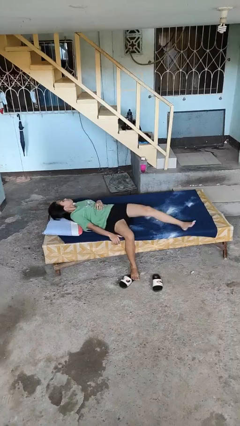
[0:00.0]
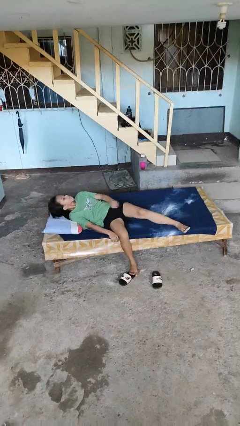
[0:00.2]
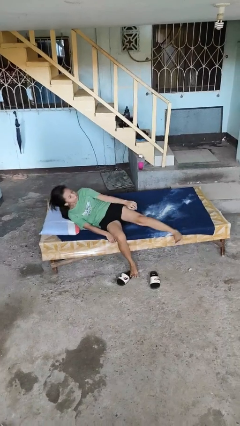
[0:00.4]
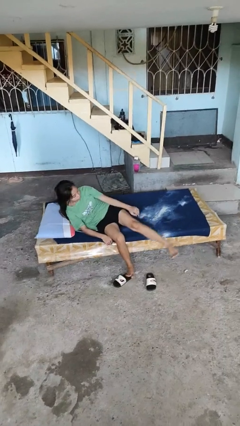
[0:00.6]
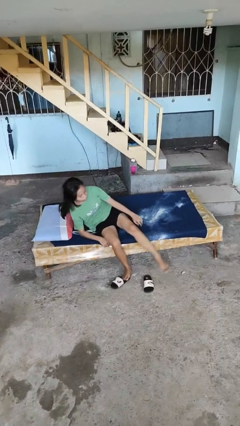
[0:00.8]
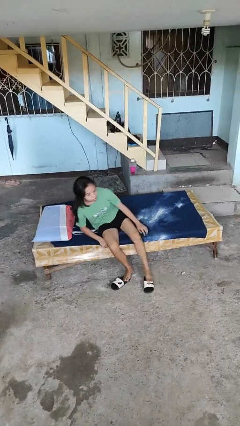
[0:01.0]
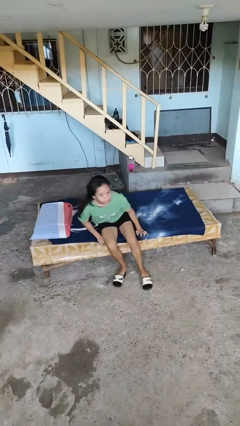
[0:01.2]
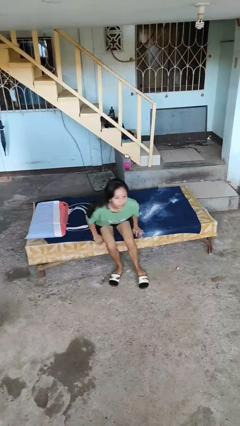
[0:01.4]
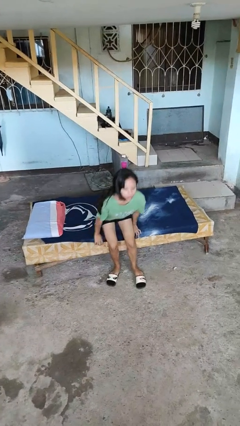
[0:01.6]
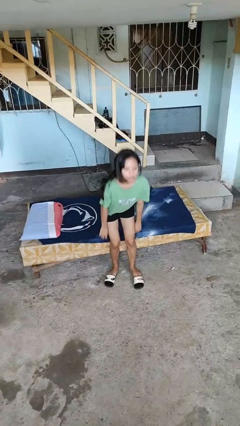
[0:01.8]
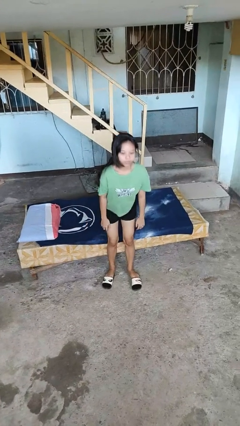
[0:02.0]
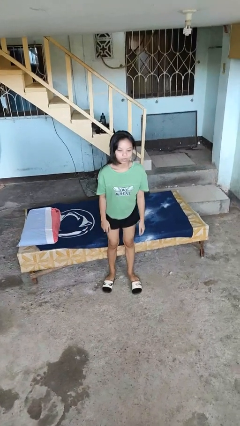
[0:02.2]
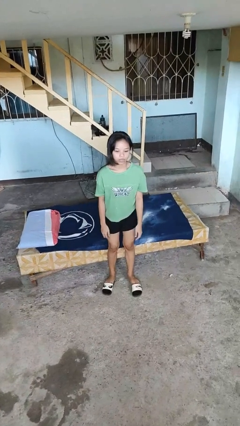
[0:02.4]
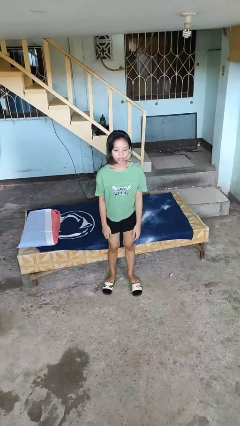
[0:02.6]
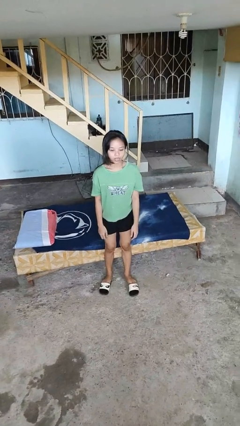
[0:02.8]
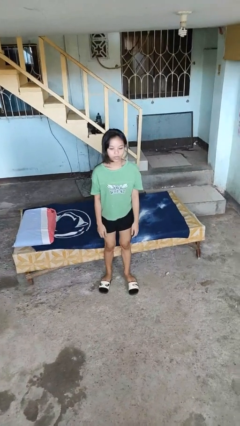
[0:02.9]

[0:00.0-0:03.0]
person stands up

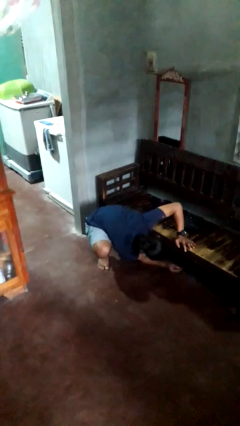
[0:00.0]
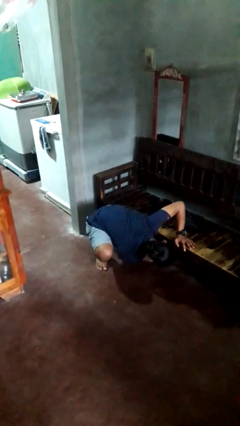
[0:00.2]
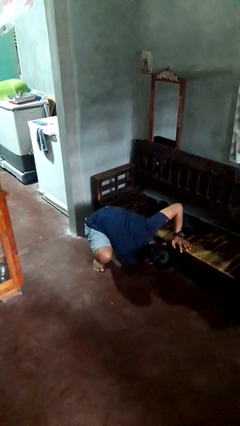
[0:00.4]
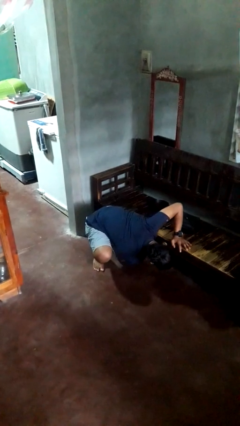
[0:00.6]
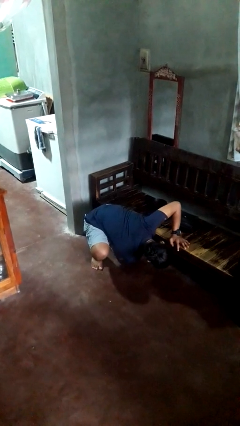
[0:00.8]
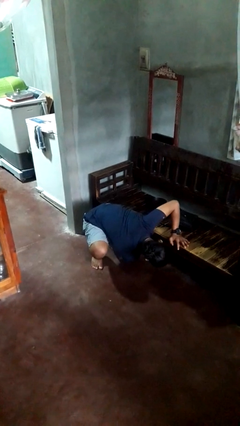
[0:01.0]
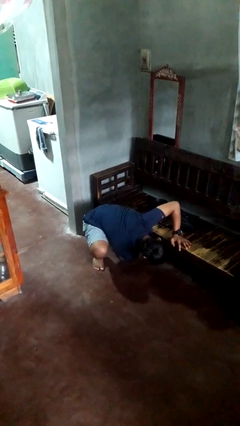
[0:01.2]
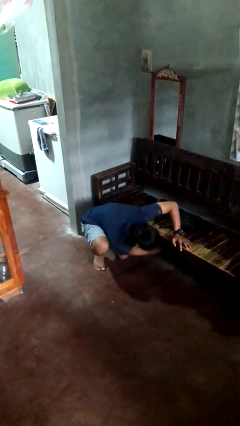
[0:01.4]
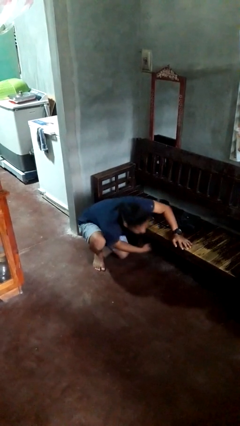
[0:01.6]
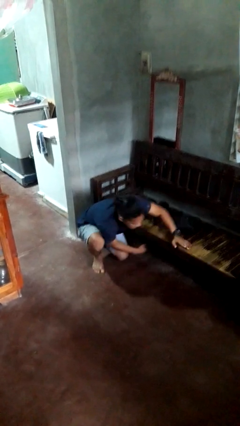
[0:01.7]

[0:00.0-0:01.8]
person searches under couch

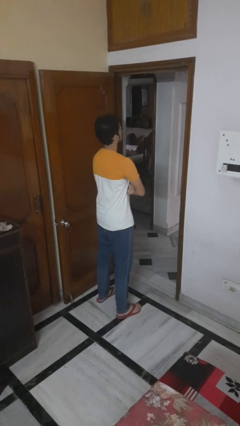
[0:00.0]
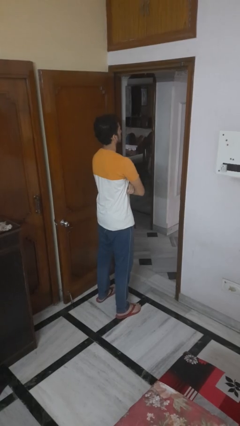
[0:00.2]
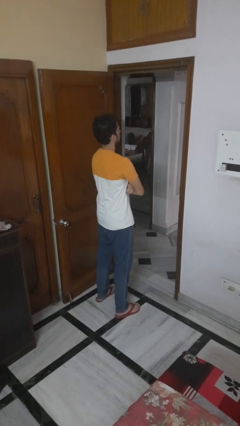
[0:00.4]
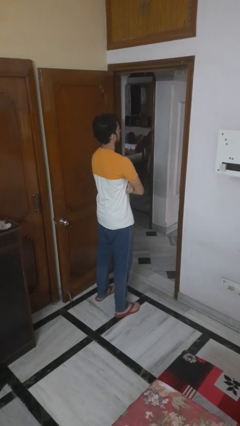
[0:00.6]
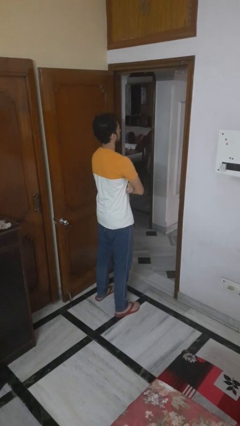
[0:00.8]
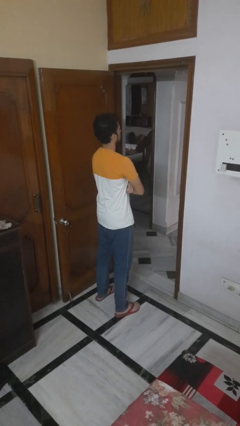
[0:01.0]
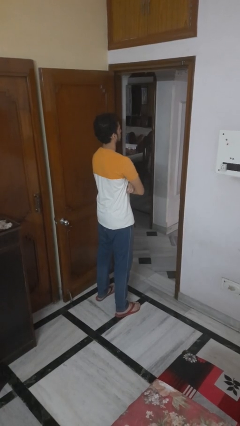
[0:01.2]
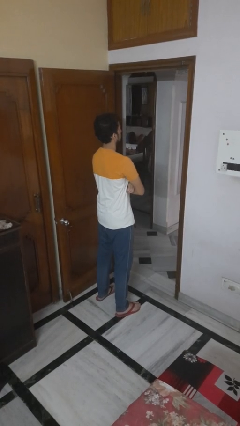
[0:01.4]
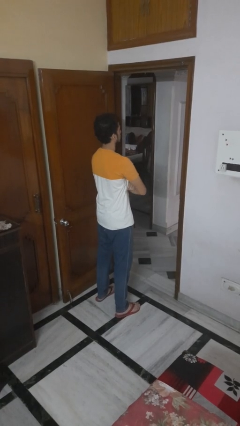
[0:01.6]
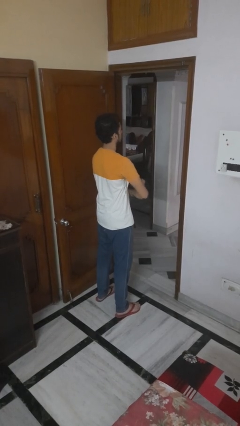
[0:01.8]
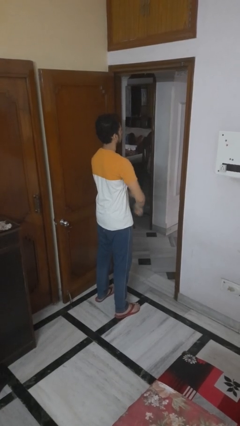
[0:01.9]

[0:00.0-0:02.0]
person crosses arms

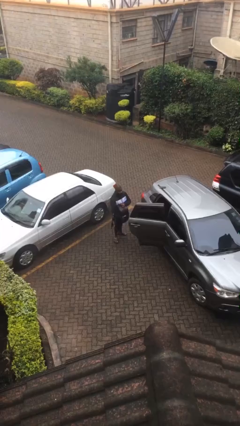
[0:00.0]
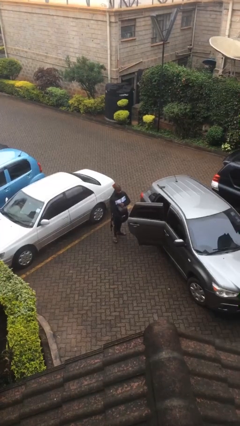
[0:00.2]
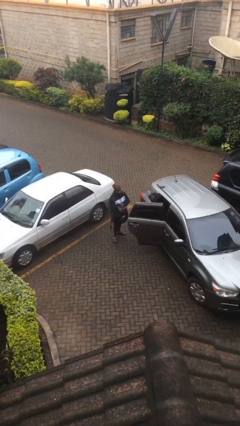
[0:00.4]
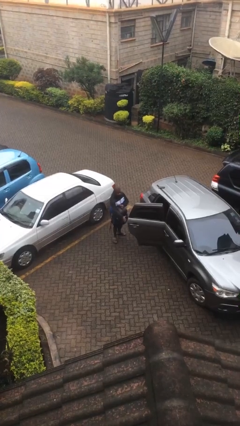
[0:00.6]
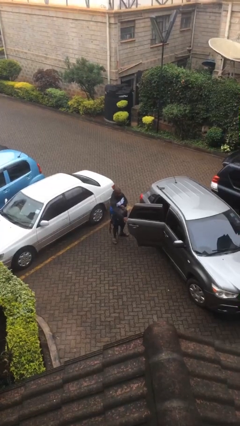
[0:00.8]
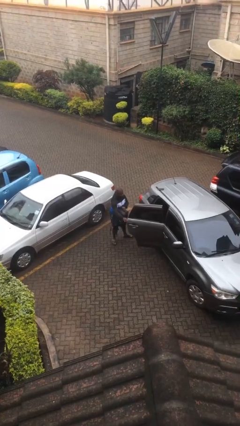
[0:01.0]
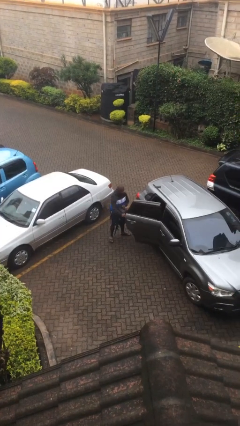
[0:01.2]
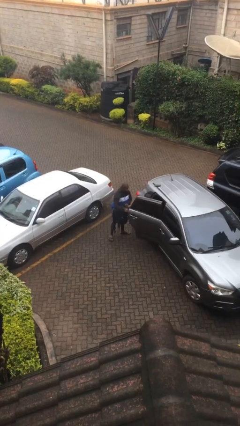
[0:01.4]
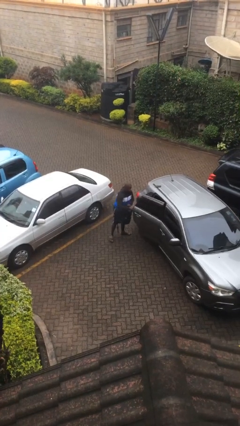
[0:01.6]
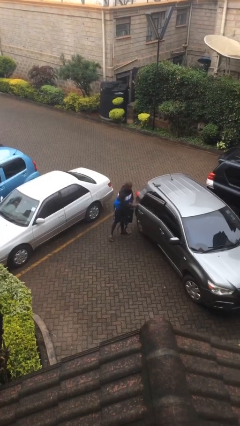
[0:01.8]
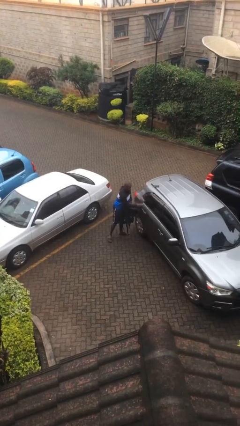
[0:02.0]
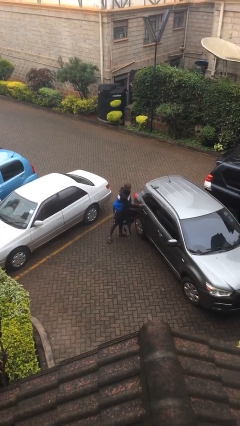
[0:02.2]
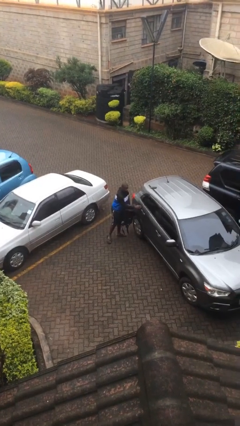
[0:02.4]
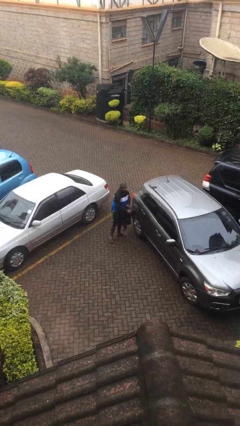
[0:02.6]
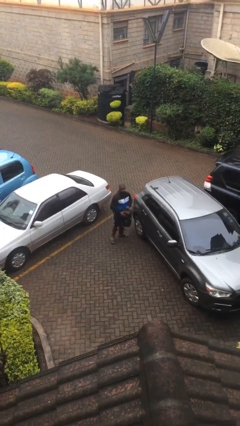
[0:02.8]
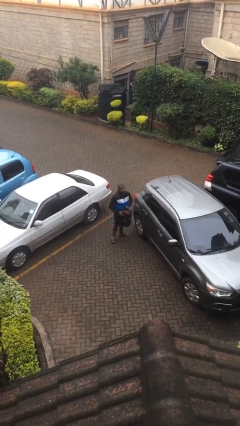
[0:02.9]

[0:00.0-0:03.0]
person closes car door

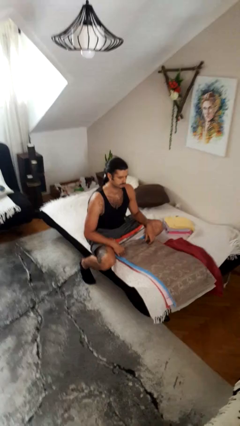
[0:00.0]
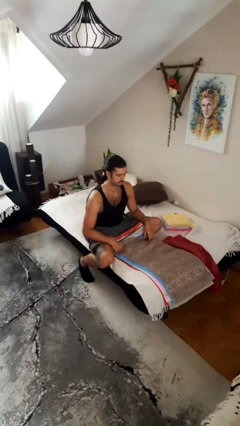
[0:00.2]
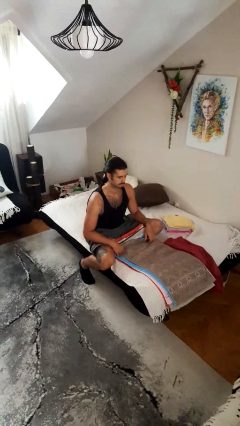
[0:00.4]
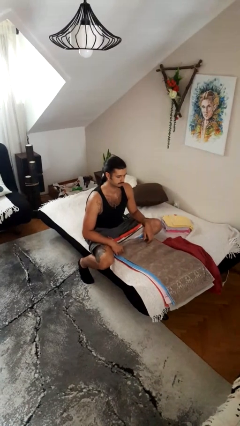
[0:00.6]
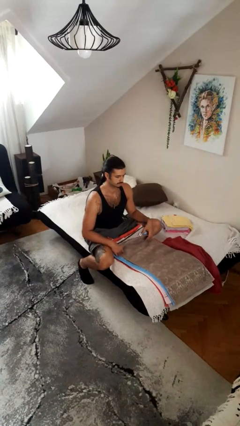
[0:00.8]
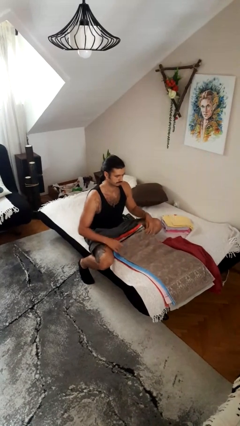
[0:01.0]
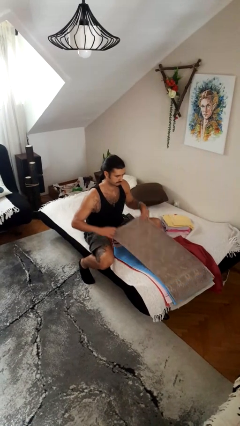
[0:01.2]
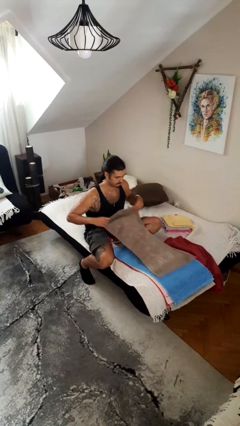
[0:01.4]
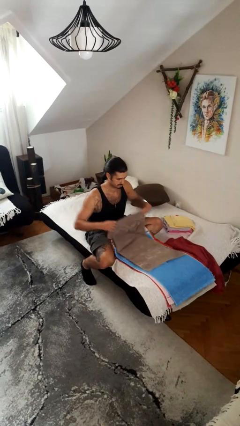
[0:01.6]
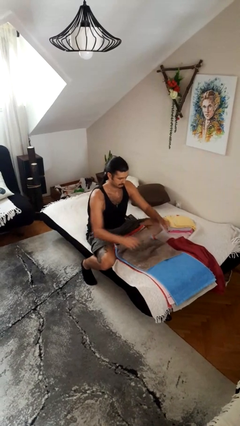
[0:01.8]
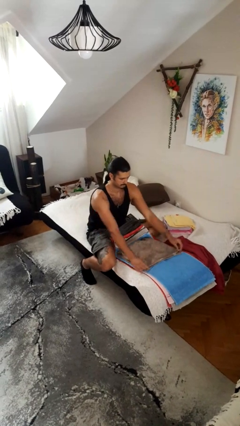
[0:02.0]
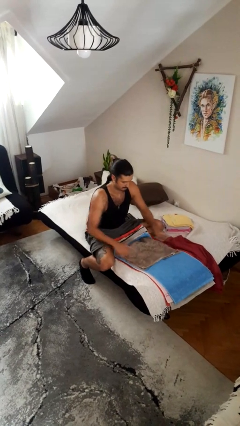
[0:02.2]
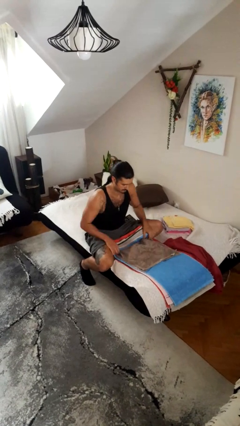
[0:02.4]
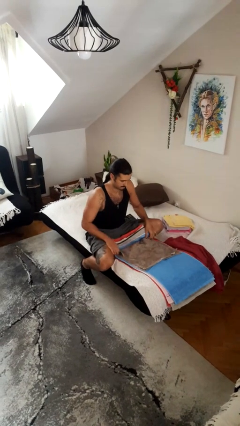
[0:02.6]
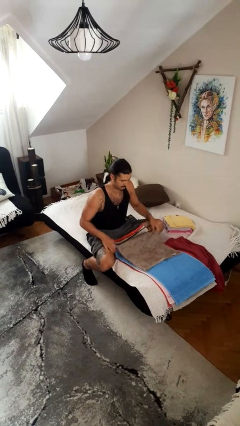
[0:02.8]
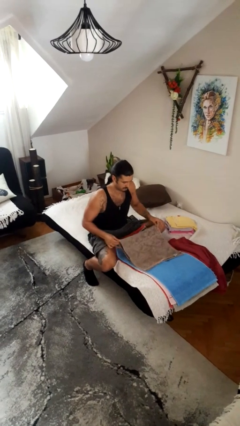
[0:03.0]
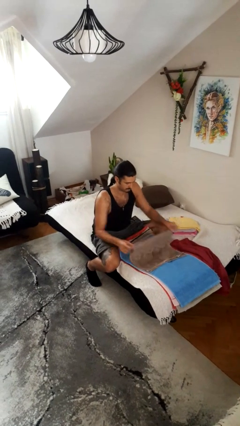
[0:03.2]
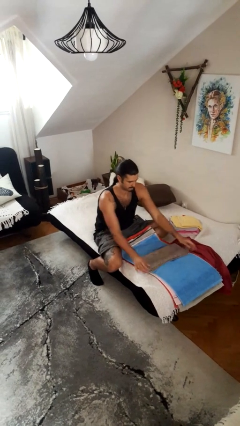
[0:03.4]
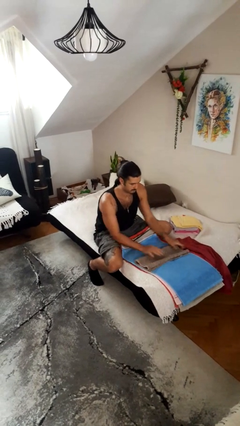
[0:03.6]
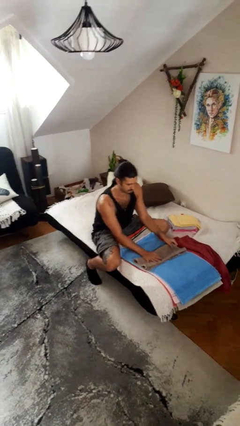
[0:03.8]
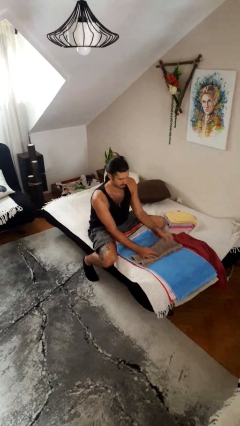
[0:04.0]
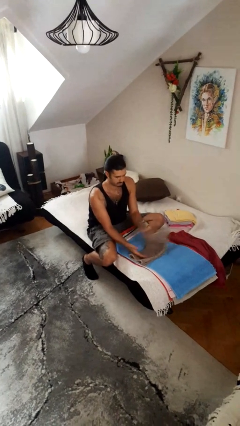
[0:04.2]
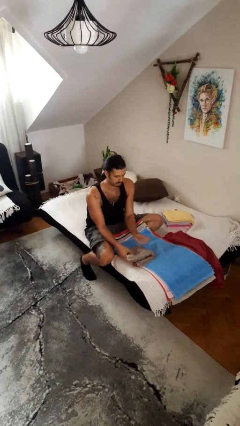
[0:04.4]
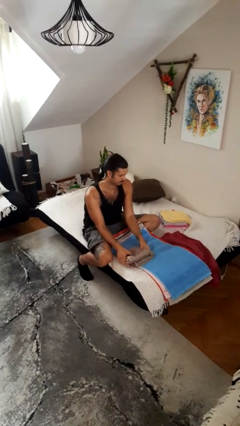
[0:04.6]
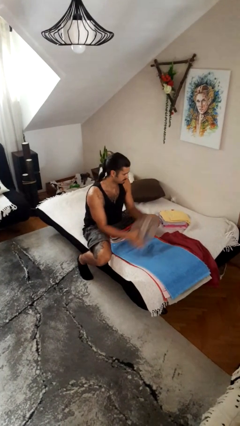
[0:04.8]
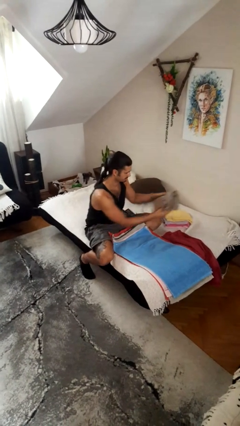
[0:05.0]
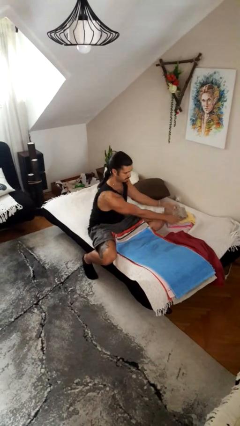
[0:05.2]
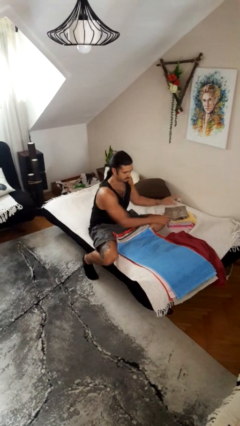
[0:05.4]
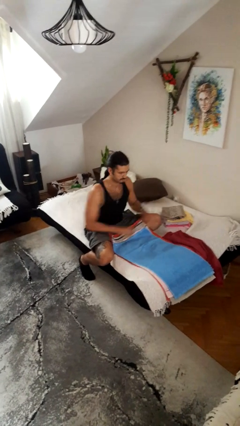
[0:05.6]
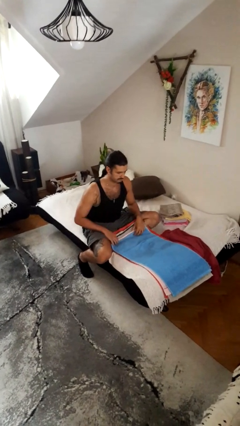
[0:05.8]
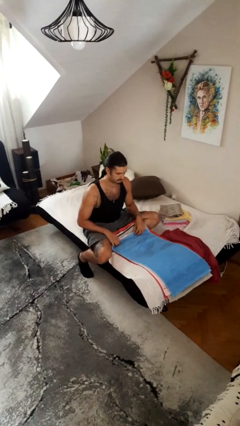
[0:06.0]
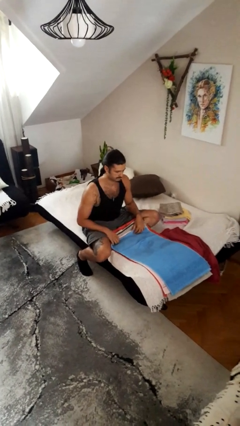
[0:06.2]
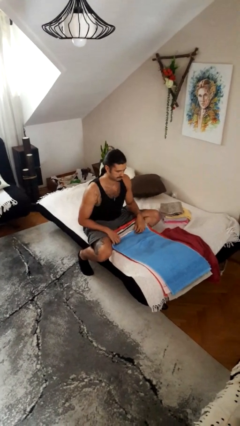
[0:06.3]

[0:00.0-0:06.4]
person folds towel

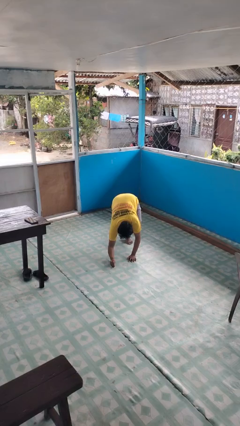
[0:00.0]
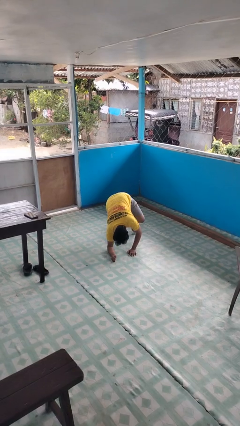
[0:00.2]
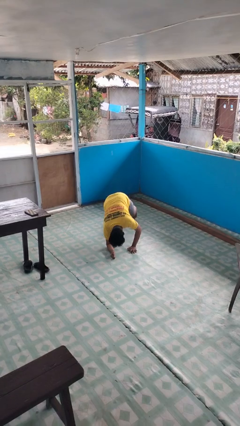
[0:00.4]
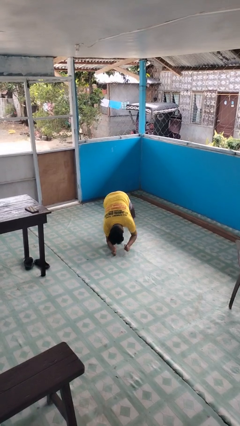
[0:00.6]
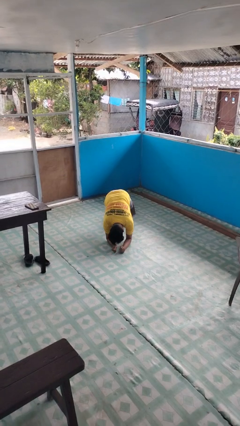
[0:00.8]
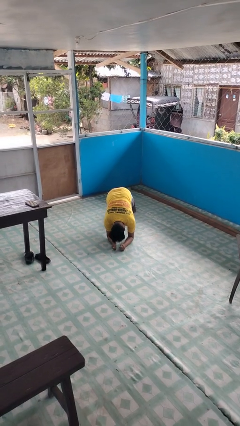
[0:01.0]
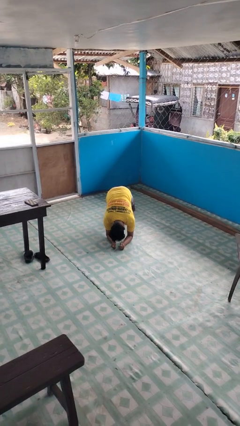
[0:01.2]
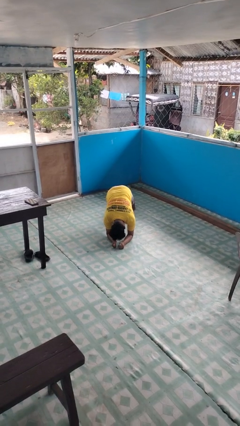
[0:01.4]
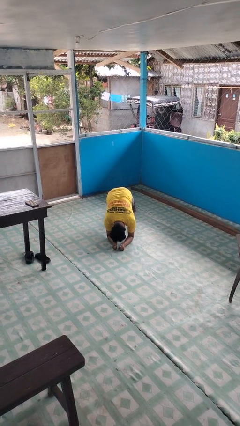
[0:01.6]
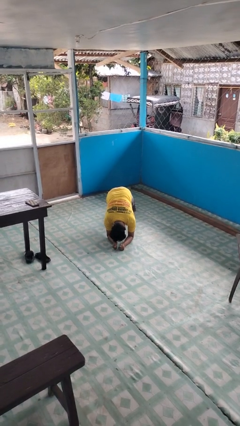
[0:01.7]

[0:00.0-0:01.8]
person exercises with plank
